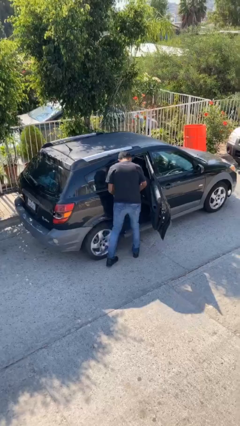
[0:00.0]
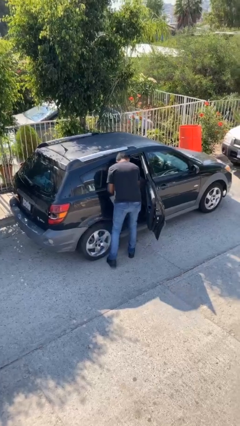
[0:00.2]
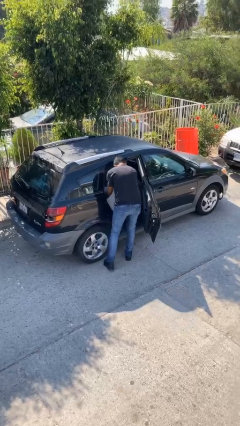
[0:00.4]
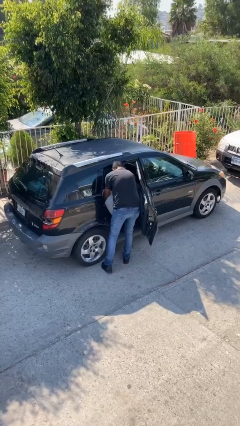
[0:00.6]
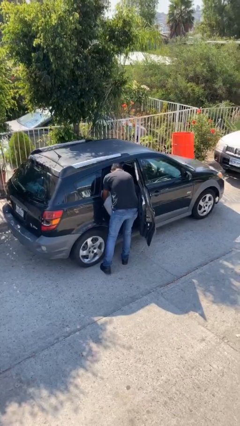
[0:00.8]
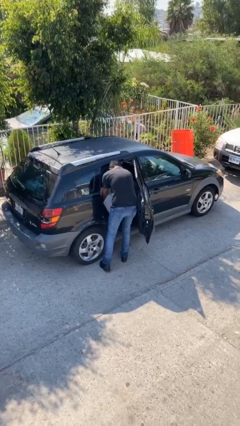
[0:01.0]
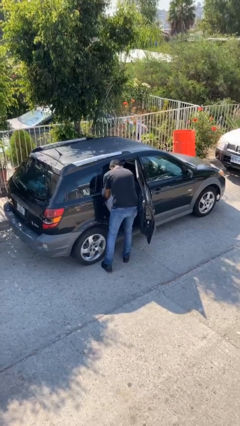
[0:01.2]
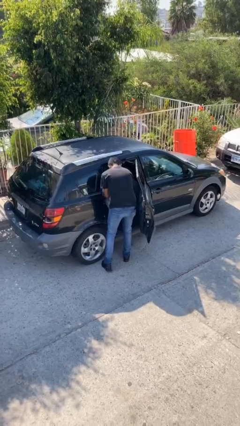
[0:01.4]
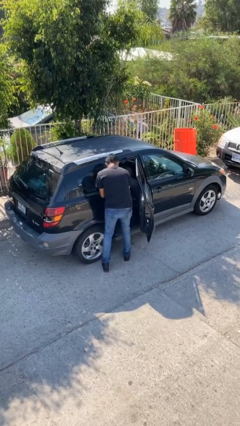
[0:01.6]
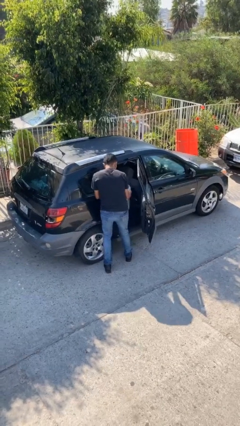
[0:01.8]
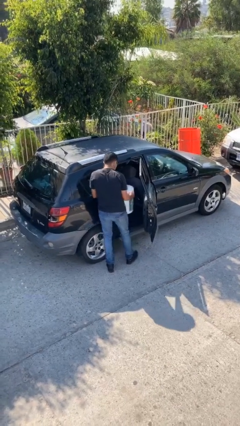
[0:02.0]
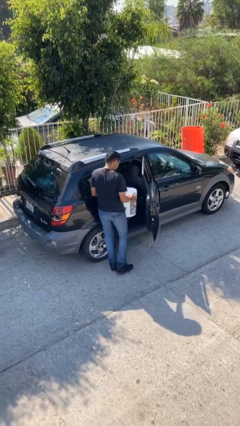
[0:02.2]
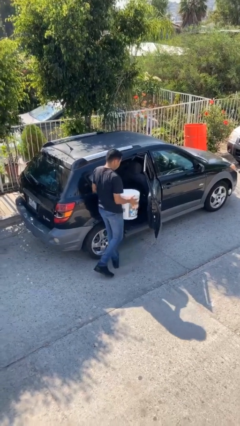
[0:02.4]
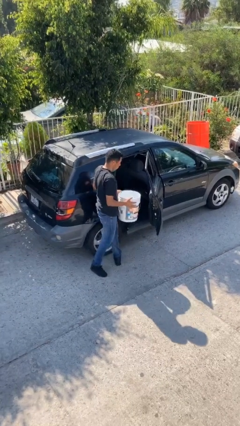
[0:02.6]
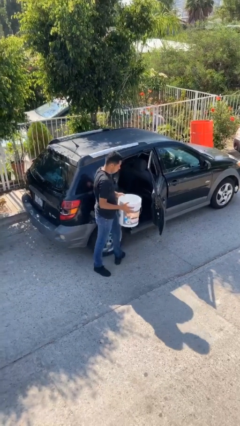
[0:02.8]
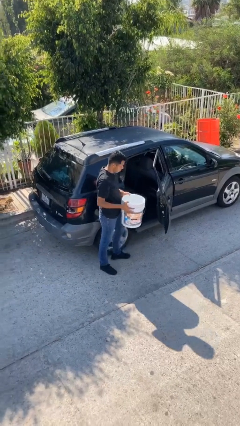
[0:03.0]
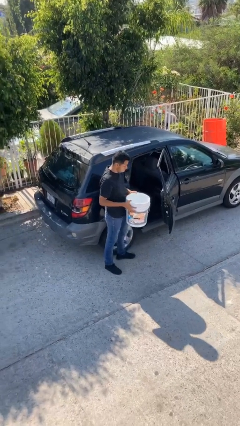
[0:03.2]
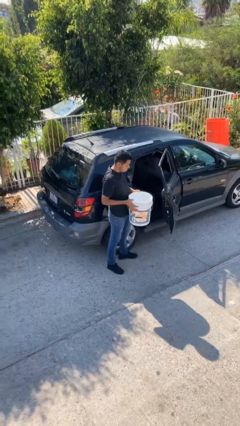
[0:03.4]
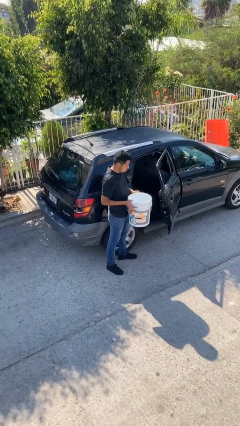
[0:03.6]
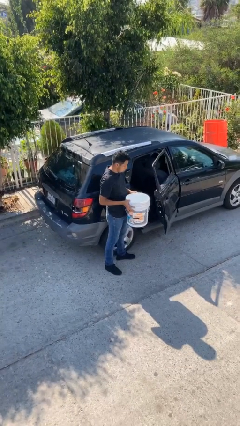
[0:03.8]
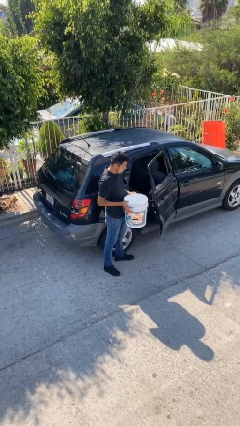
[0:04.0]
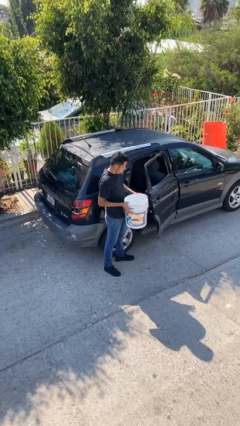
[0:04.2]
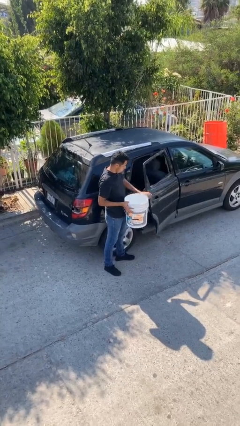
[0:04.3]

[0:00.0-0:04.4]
person unloads car

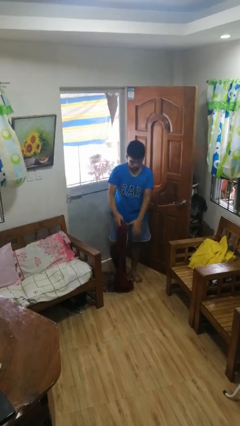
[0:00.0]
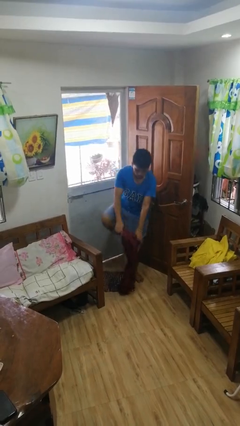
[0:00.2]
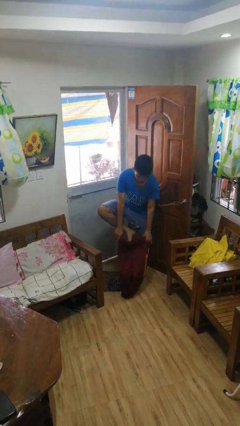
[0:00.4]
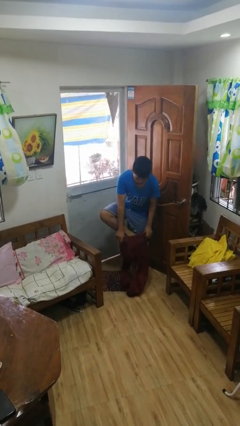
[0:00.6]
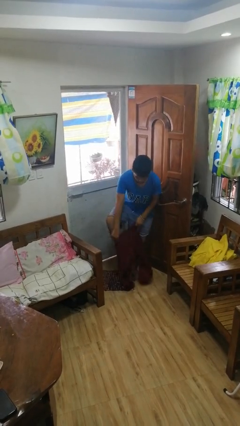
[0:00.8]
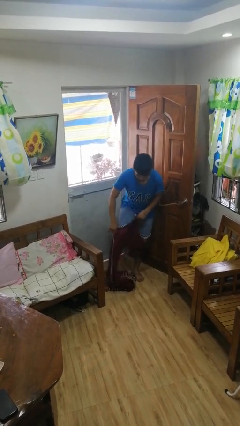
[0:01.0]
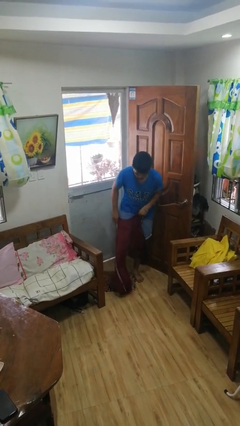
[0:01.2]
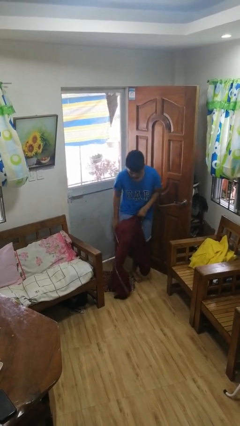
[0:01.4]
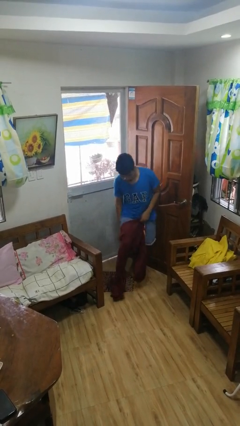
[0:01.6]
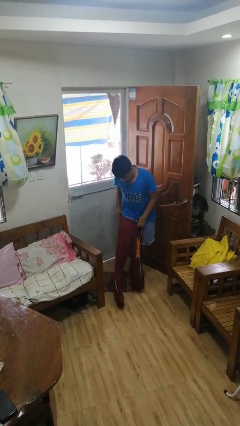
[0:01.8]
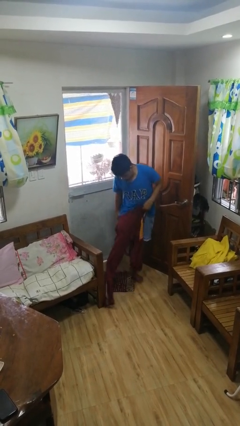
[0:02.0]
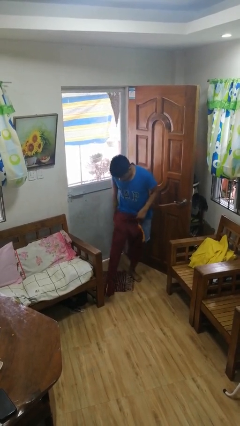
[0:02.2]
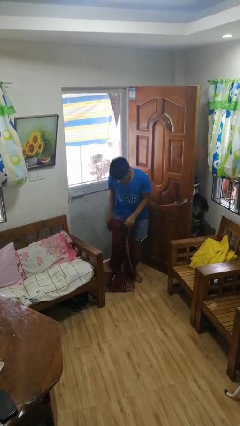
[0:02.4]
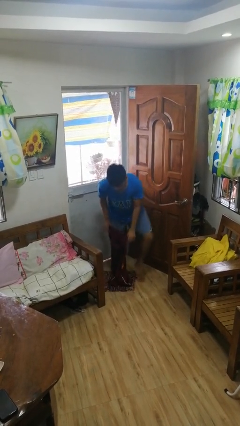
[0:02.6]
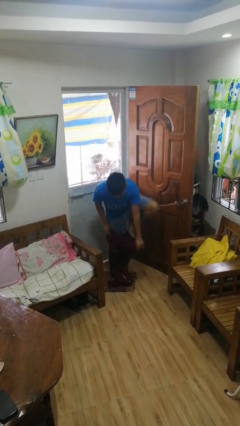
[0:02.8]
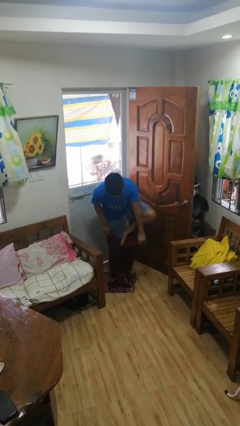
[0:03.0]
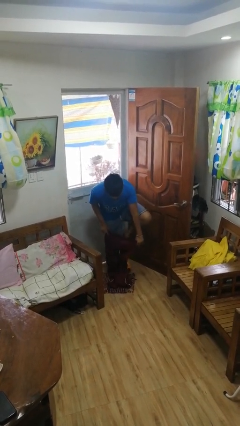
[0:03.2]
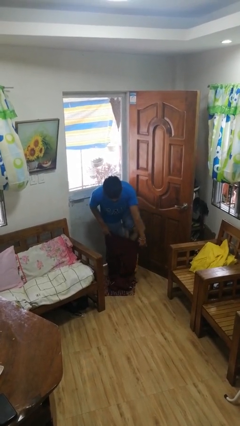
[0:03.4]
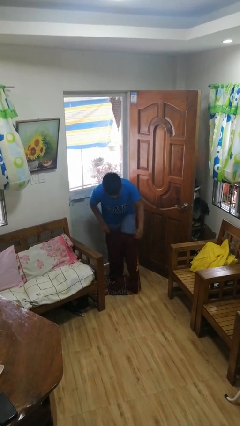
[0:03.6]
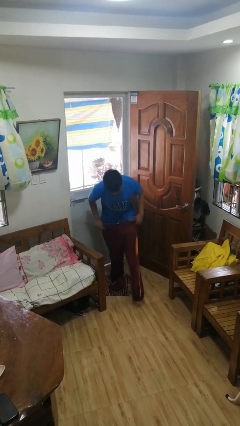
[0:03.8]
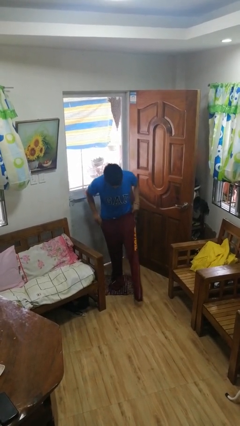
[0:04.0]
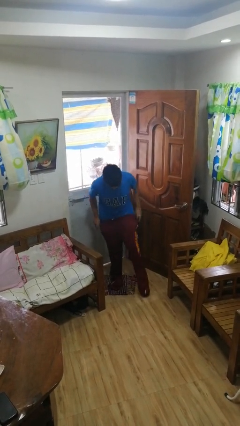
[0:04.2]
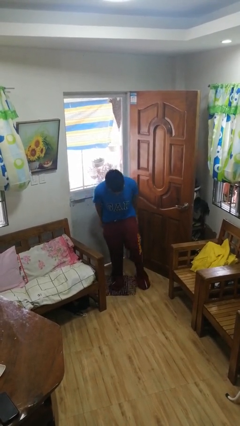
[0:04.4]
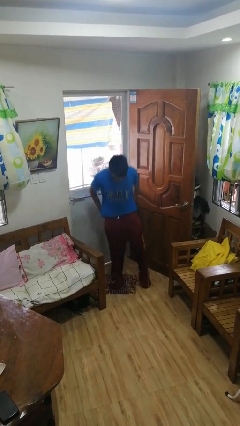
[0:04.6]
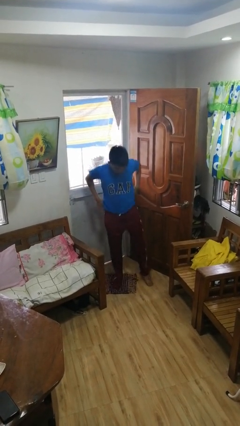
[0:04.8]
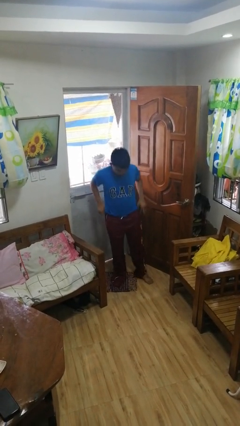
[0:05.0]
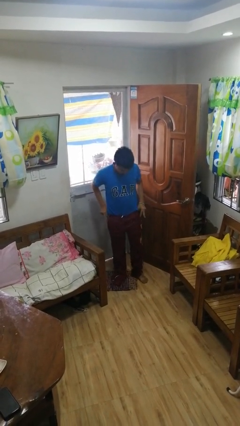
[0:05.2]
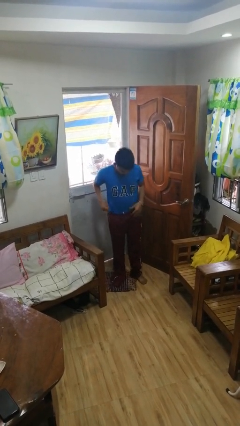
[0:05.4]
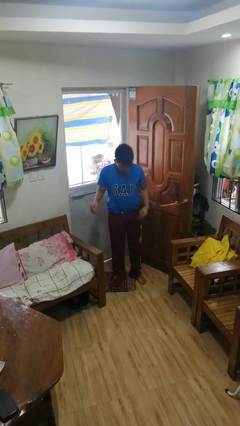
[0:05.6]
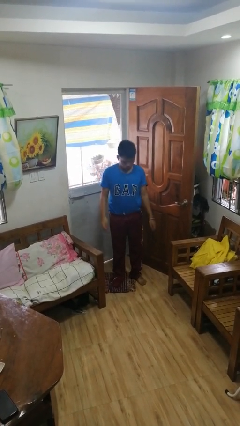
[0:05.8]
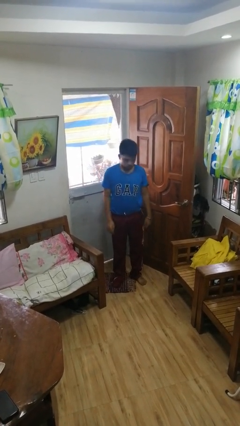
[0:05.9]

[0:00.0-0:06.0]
person puts on pants

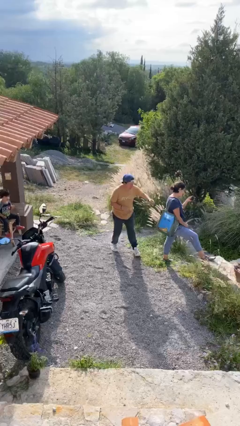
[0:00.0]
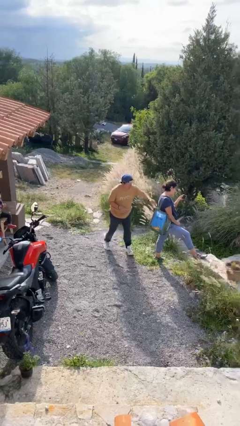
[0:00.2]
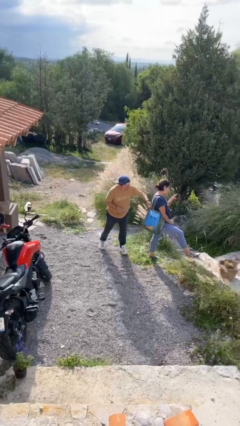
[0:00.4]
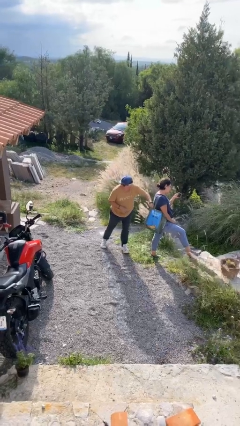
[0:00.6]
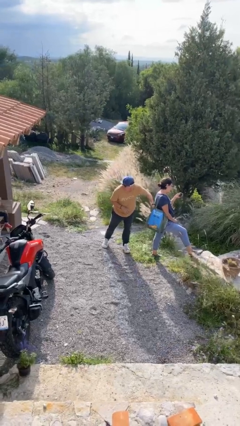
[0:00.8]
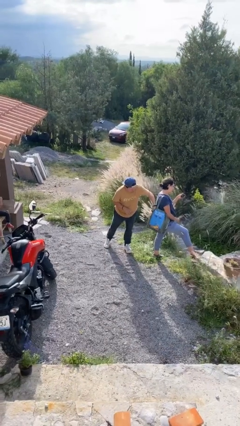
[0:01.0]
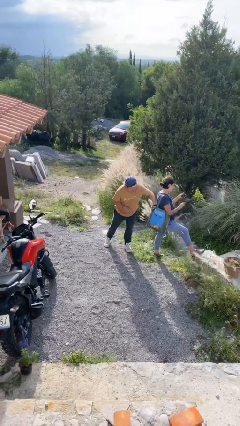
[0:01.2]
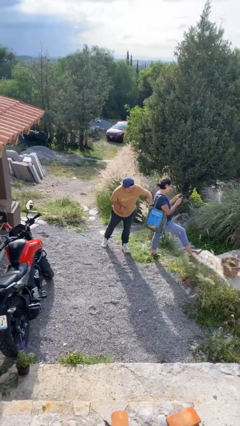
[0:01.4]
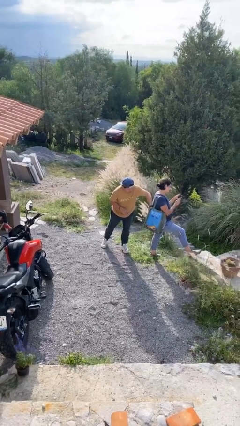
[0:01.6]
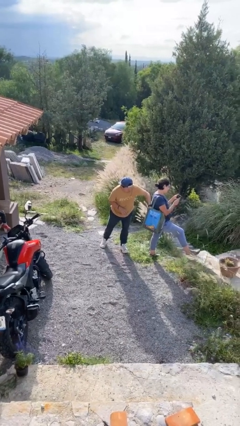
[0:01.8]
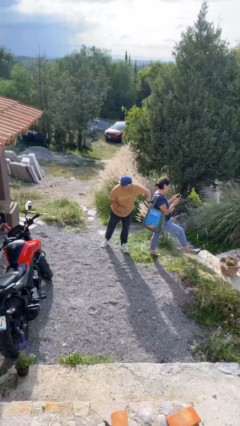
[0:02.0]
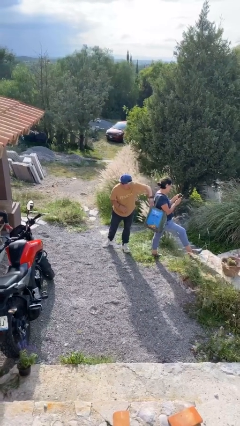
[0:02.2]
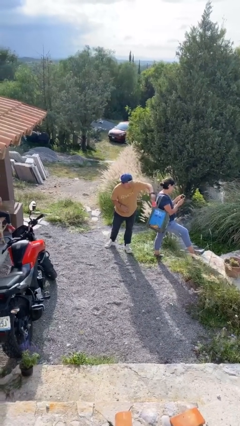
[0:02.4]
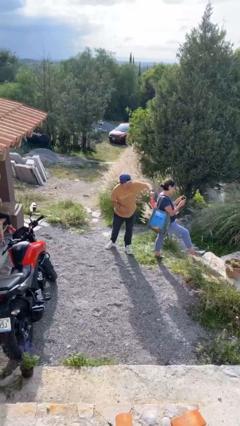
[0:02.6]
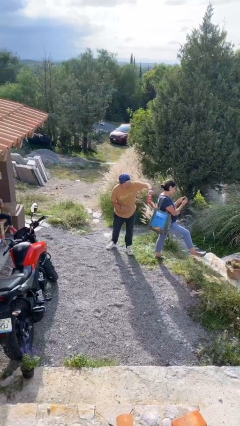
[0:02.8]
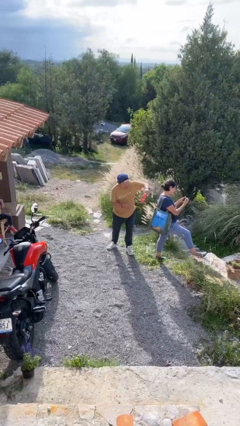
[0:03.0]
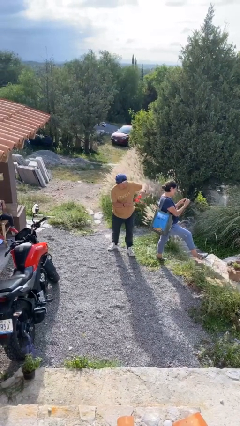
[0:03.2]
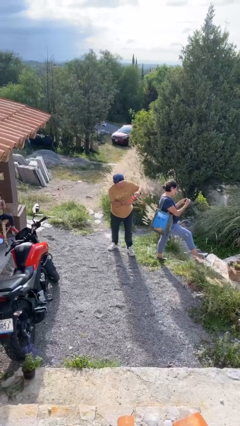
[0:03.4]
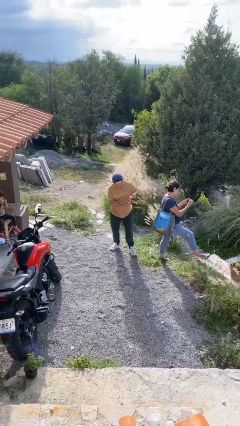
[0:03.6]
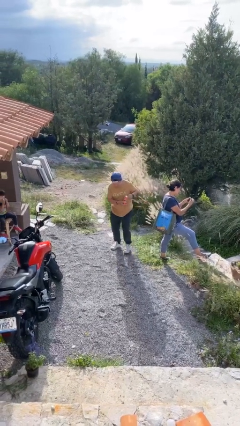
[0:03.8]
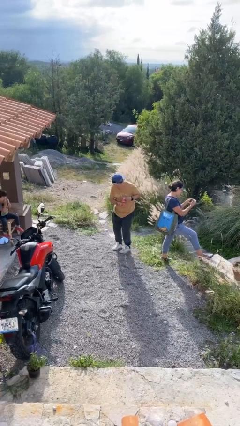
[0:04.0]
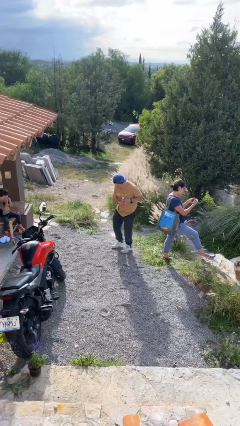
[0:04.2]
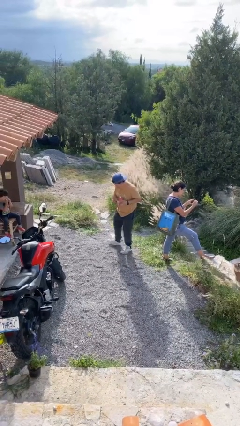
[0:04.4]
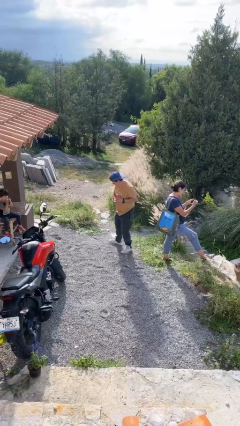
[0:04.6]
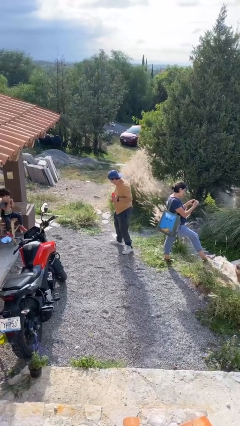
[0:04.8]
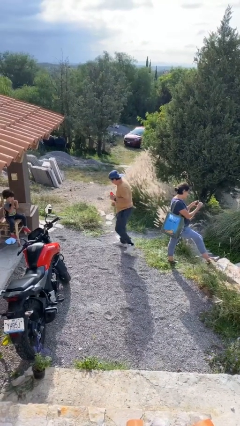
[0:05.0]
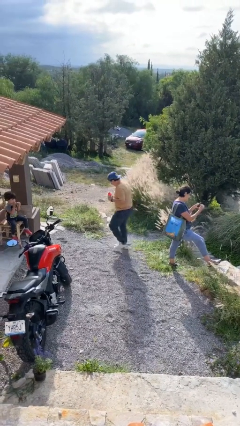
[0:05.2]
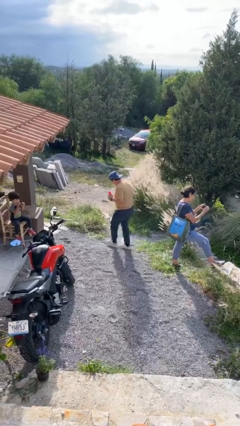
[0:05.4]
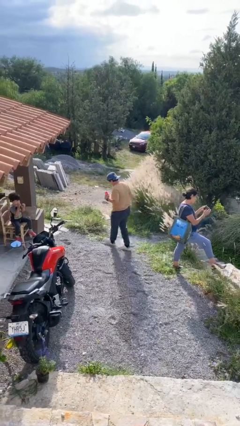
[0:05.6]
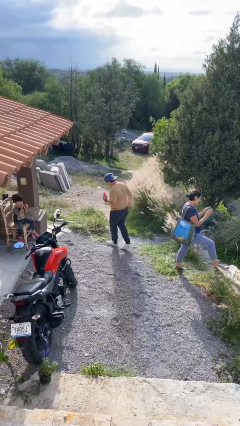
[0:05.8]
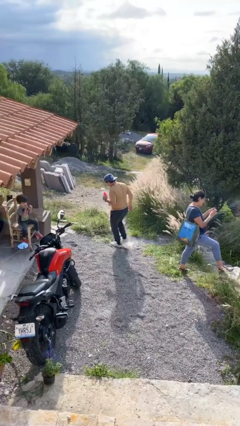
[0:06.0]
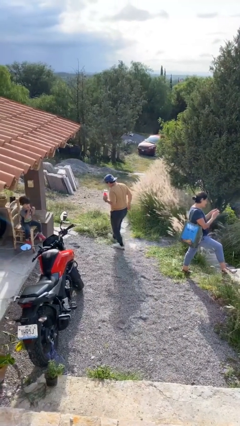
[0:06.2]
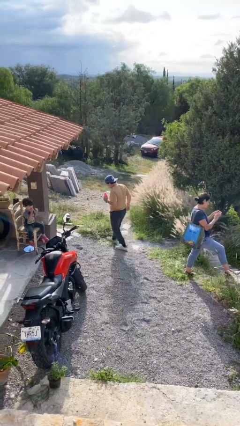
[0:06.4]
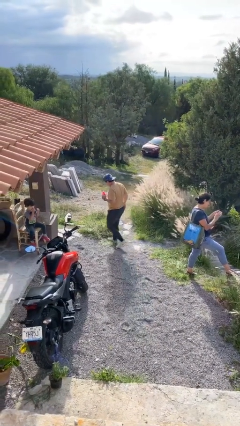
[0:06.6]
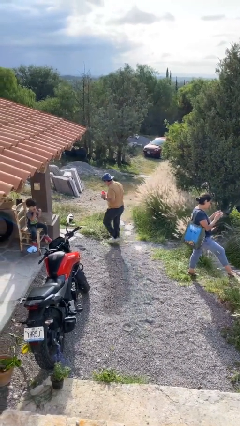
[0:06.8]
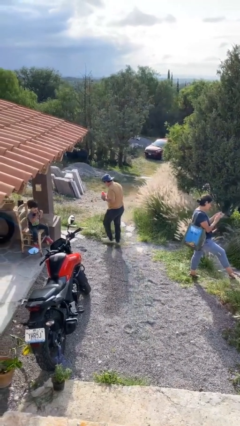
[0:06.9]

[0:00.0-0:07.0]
person steals object from person

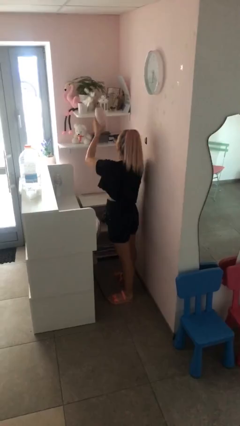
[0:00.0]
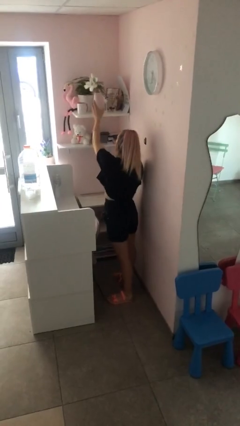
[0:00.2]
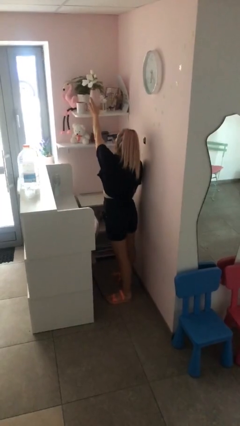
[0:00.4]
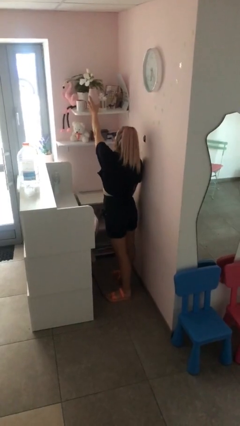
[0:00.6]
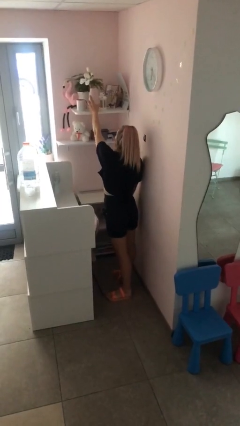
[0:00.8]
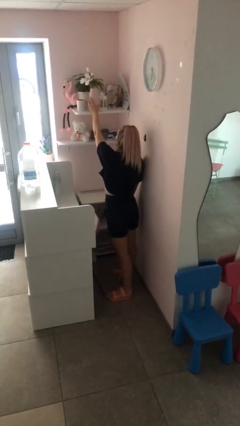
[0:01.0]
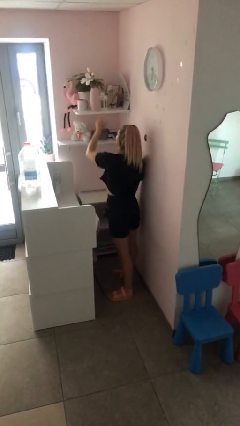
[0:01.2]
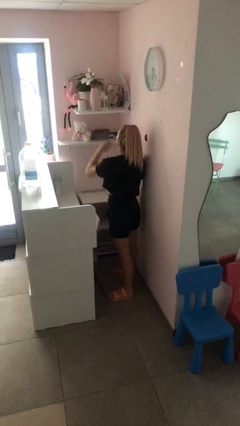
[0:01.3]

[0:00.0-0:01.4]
person puts down object into cabinet
